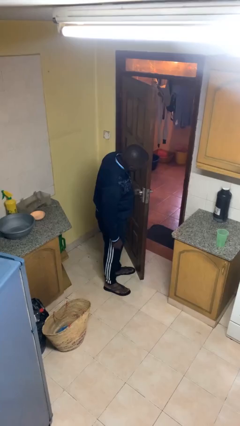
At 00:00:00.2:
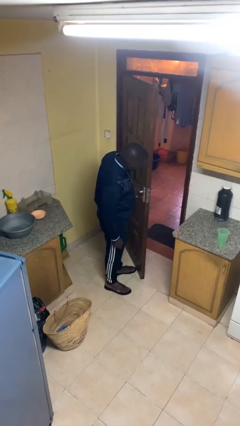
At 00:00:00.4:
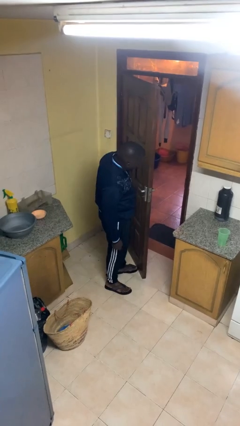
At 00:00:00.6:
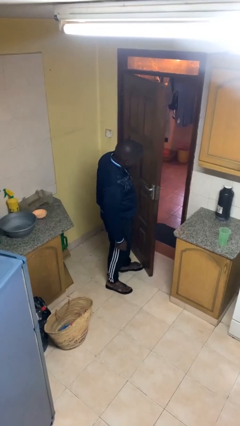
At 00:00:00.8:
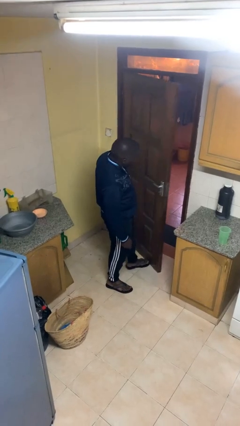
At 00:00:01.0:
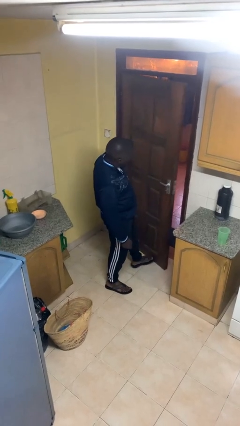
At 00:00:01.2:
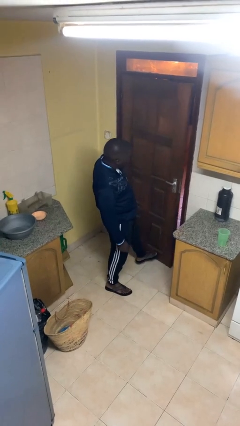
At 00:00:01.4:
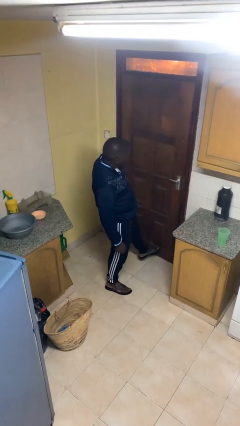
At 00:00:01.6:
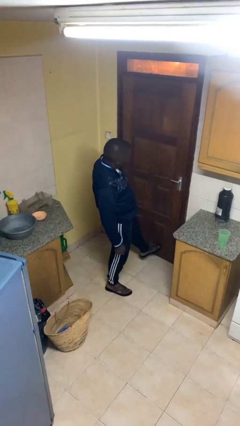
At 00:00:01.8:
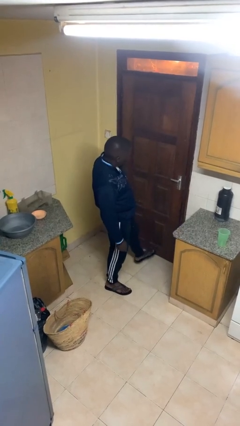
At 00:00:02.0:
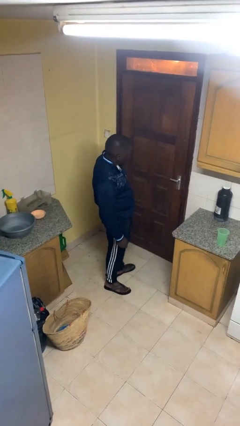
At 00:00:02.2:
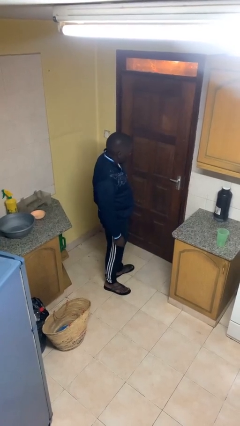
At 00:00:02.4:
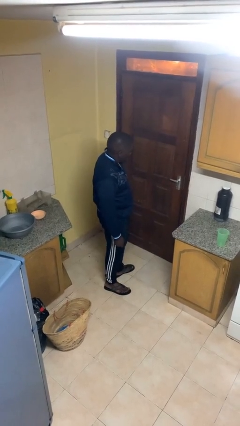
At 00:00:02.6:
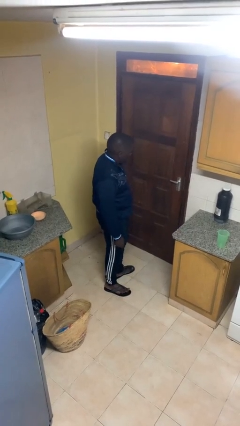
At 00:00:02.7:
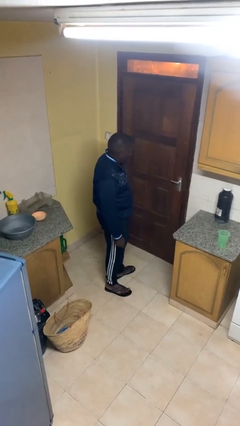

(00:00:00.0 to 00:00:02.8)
person closes door with foot

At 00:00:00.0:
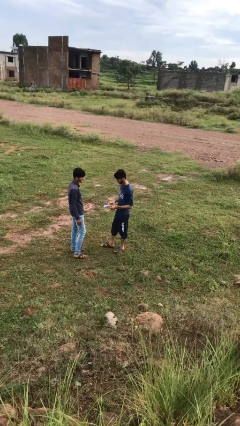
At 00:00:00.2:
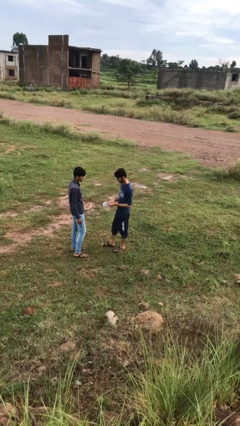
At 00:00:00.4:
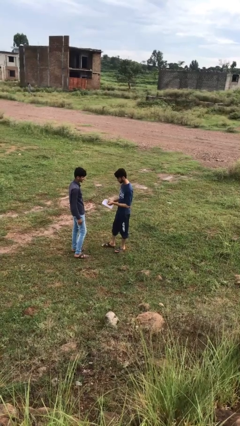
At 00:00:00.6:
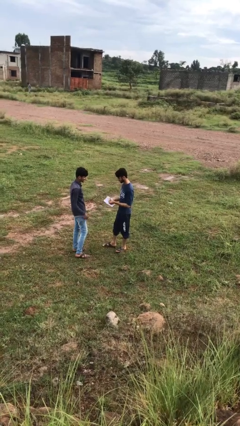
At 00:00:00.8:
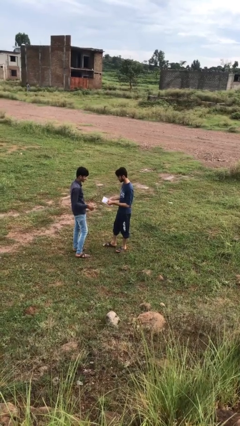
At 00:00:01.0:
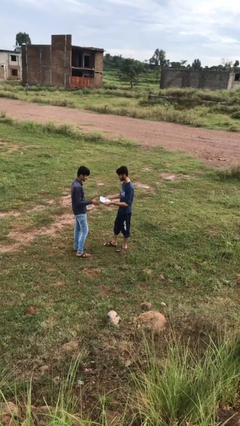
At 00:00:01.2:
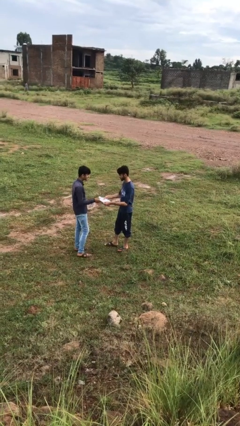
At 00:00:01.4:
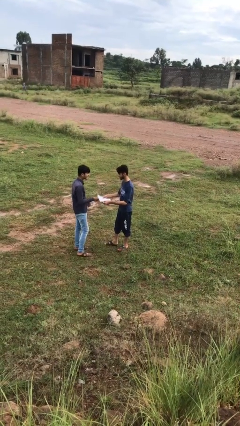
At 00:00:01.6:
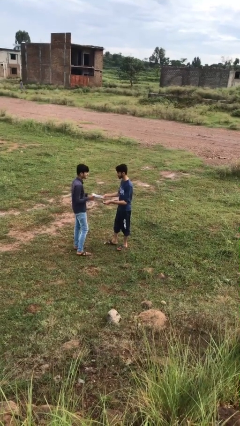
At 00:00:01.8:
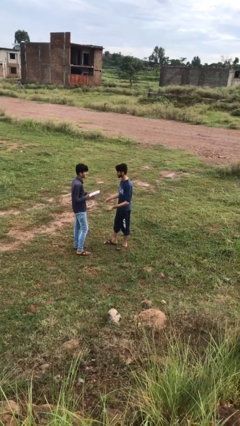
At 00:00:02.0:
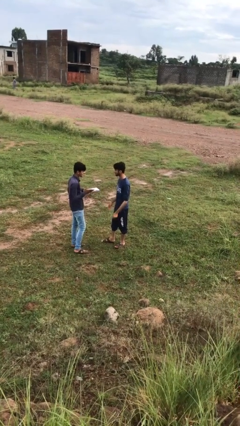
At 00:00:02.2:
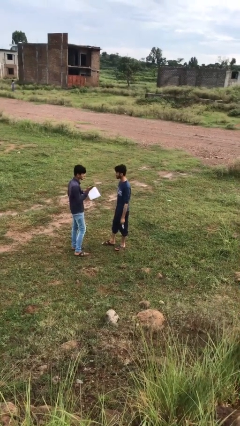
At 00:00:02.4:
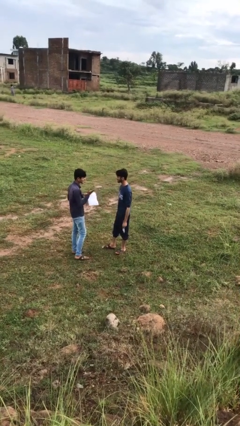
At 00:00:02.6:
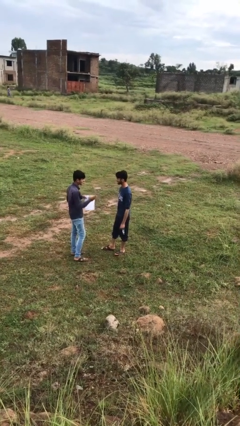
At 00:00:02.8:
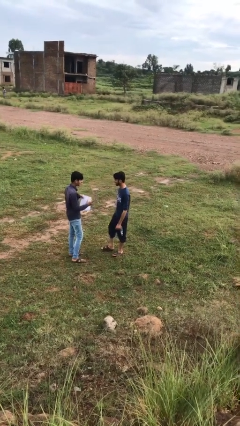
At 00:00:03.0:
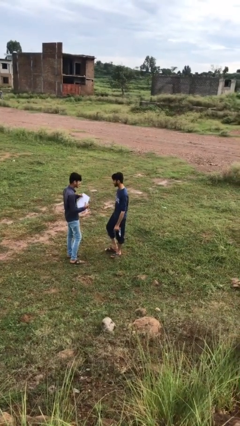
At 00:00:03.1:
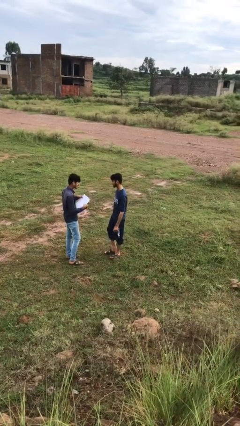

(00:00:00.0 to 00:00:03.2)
person transfers object to person

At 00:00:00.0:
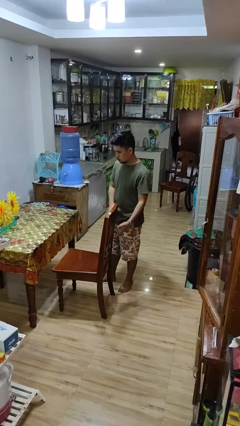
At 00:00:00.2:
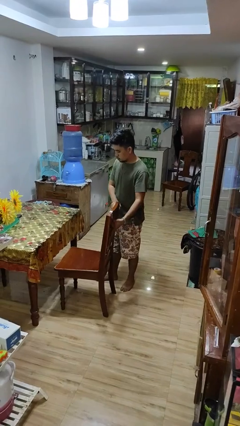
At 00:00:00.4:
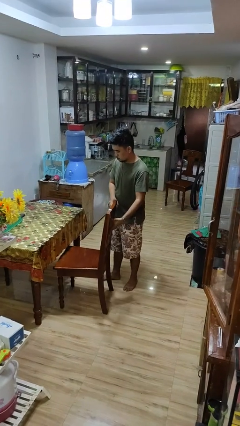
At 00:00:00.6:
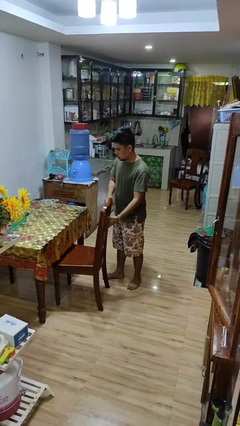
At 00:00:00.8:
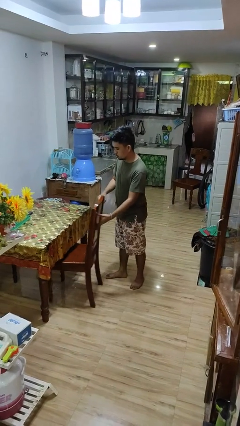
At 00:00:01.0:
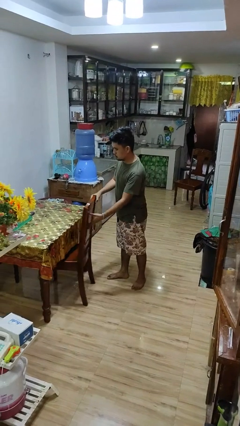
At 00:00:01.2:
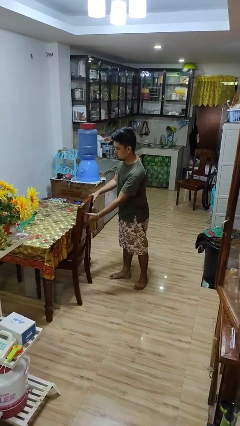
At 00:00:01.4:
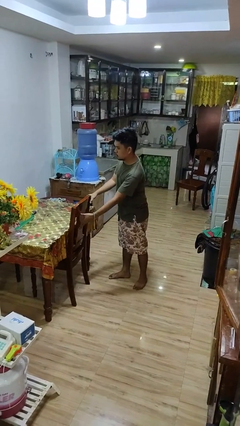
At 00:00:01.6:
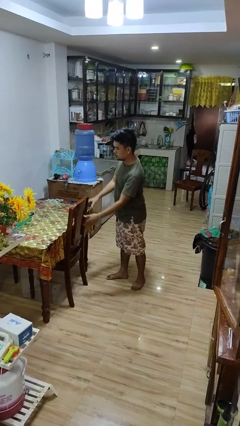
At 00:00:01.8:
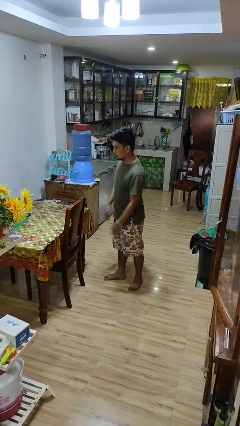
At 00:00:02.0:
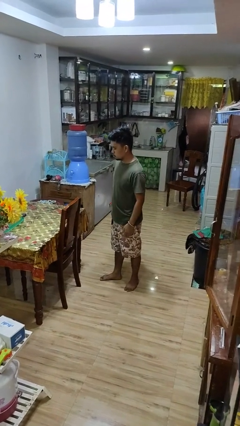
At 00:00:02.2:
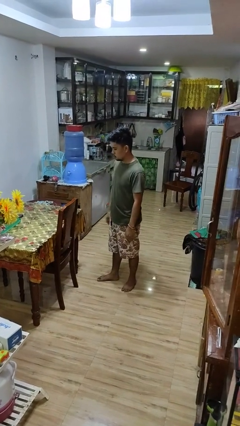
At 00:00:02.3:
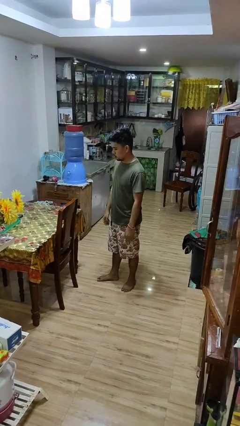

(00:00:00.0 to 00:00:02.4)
person pushes in chair

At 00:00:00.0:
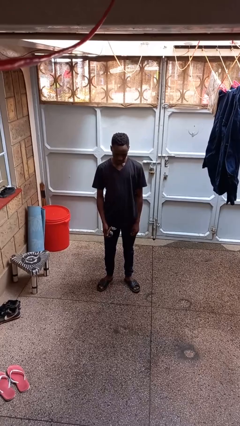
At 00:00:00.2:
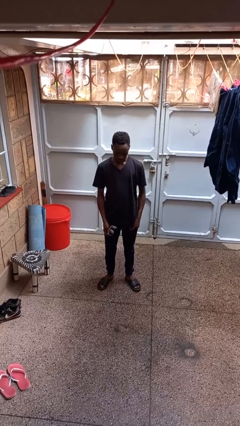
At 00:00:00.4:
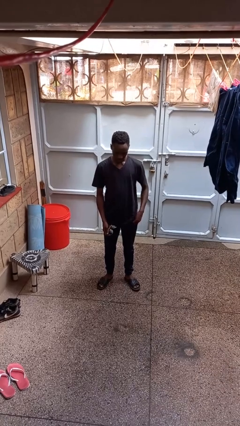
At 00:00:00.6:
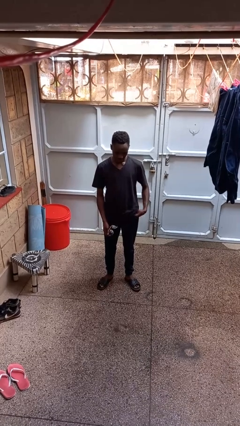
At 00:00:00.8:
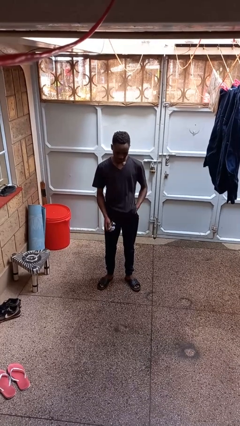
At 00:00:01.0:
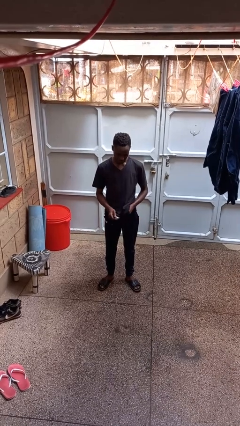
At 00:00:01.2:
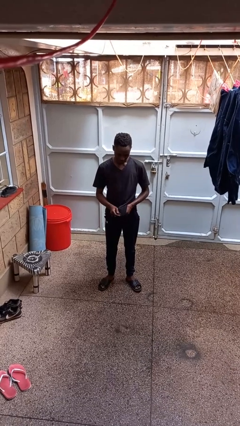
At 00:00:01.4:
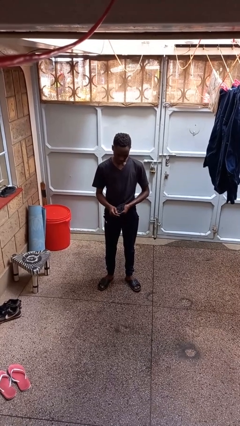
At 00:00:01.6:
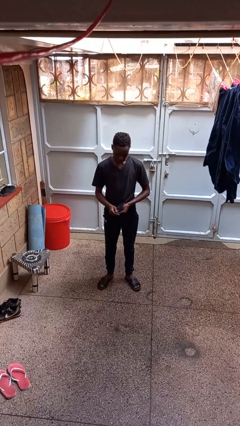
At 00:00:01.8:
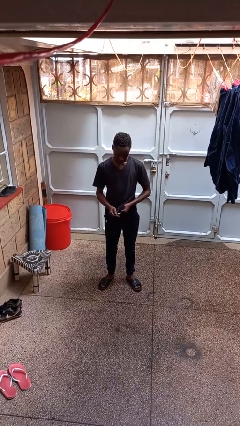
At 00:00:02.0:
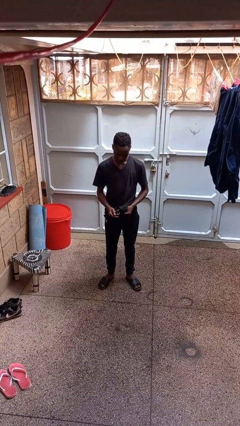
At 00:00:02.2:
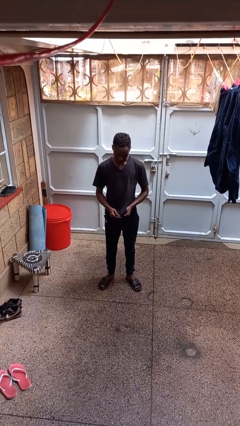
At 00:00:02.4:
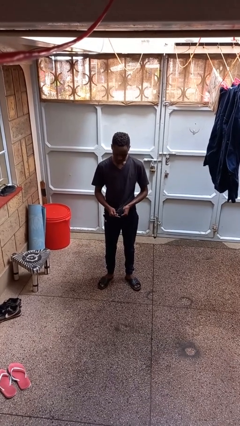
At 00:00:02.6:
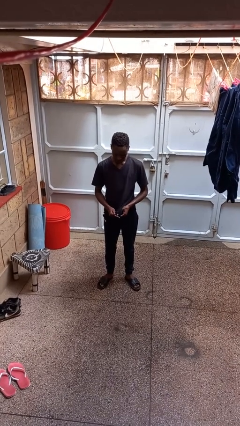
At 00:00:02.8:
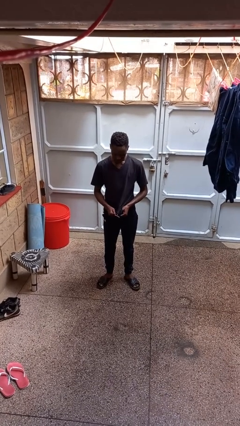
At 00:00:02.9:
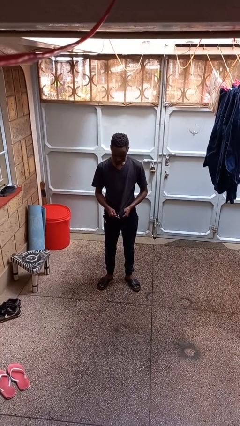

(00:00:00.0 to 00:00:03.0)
person cleans eyeglasses

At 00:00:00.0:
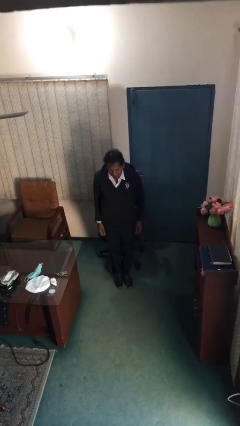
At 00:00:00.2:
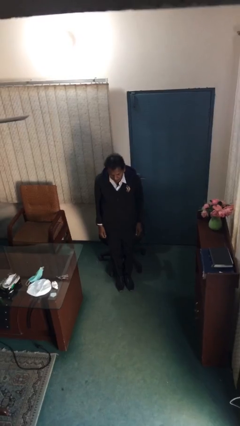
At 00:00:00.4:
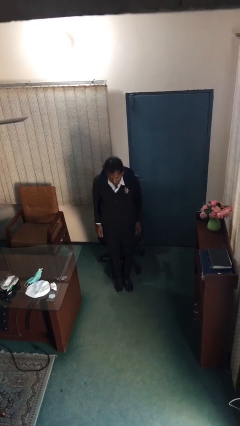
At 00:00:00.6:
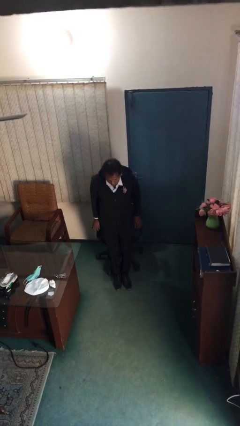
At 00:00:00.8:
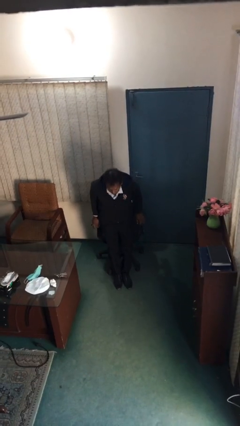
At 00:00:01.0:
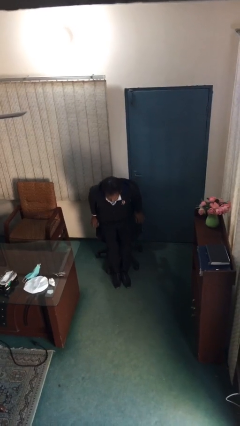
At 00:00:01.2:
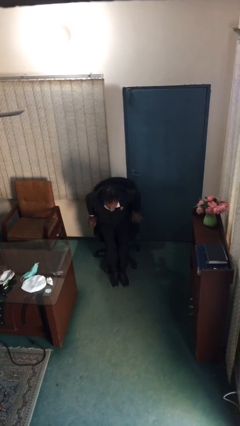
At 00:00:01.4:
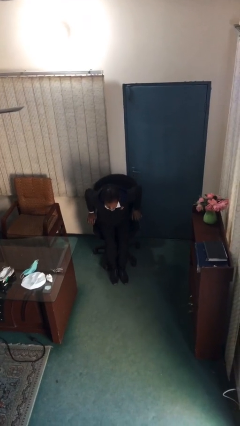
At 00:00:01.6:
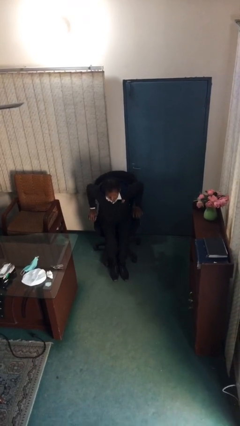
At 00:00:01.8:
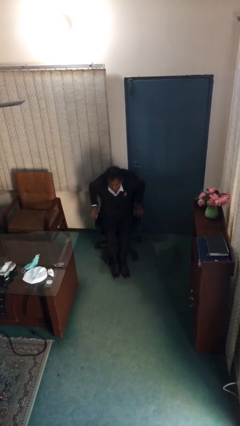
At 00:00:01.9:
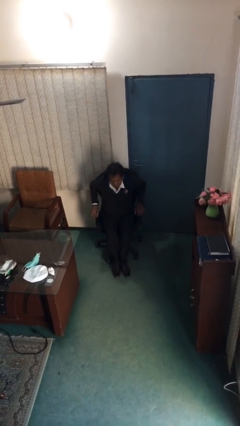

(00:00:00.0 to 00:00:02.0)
person sits down

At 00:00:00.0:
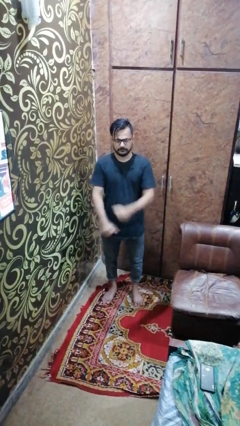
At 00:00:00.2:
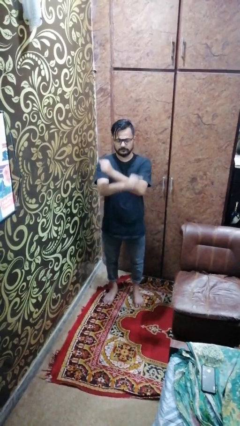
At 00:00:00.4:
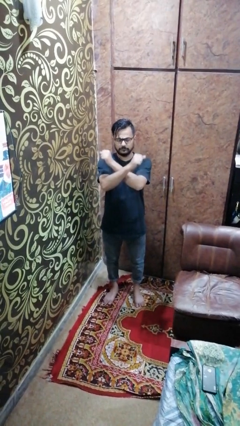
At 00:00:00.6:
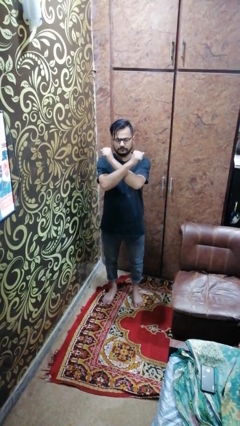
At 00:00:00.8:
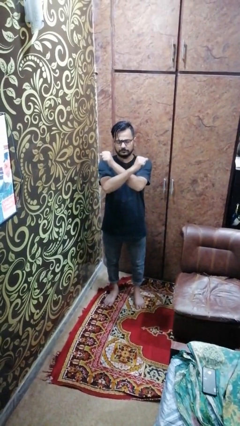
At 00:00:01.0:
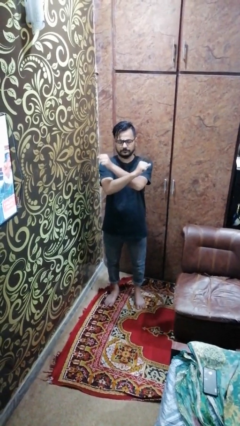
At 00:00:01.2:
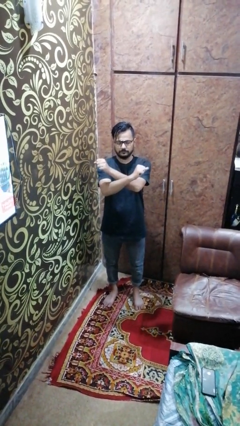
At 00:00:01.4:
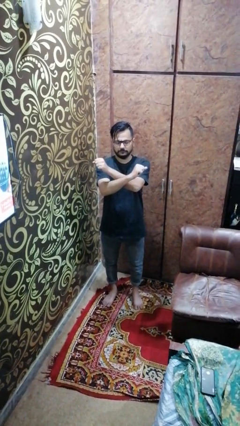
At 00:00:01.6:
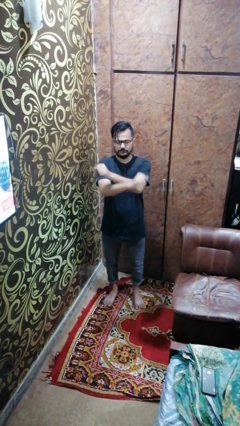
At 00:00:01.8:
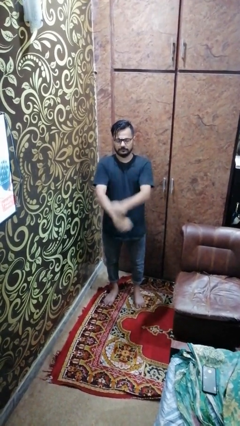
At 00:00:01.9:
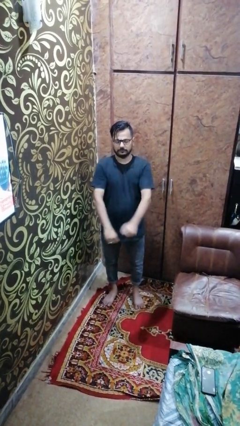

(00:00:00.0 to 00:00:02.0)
person crosses arms

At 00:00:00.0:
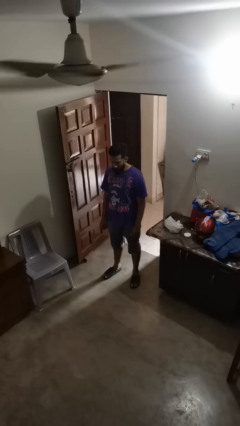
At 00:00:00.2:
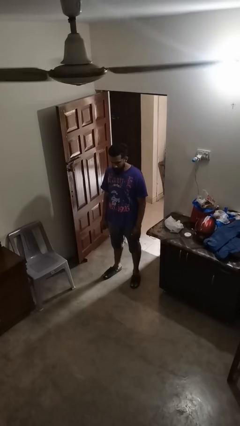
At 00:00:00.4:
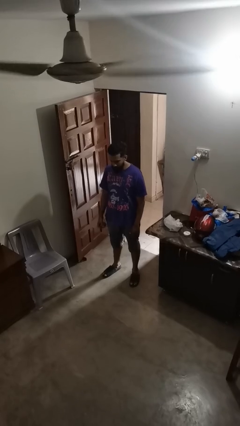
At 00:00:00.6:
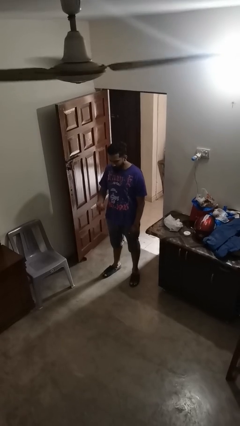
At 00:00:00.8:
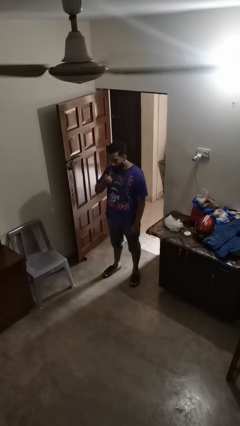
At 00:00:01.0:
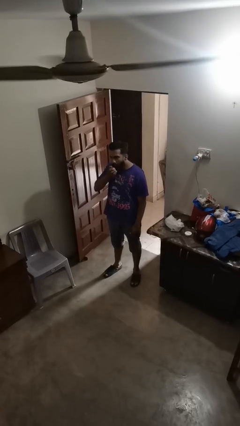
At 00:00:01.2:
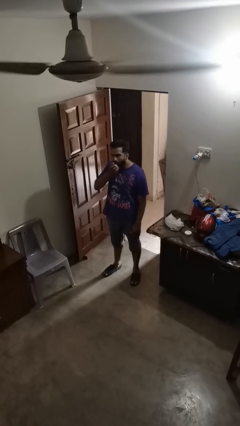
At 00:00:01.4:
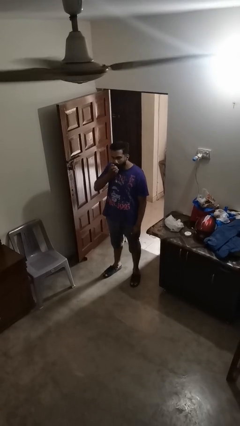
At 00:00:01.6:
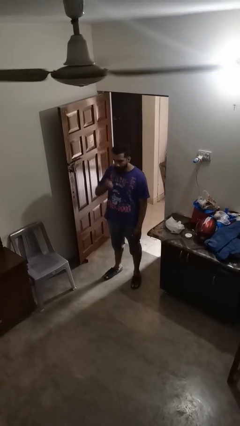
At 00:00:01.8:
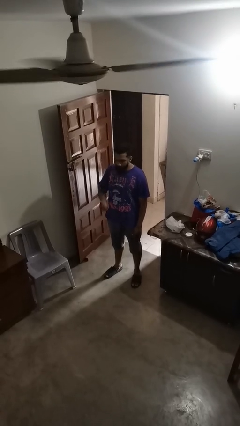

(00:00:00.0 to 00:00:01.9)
person eats apple
